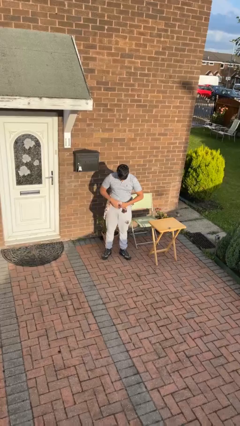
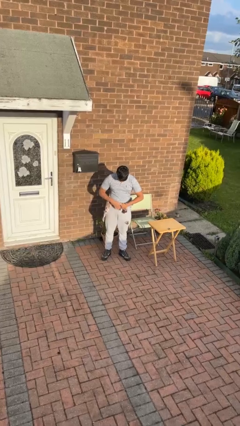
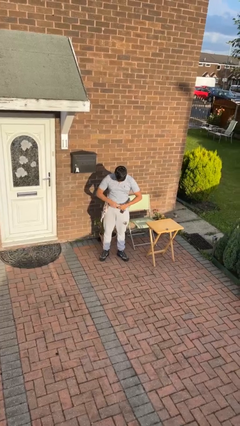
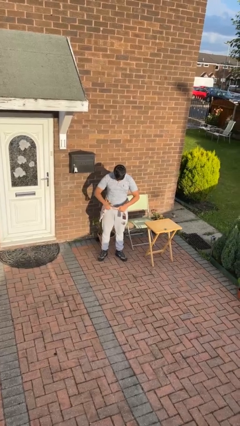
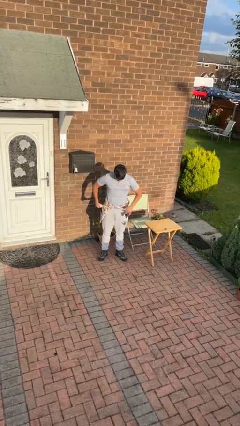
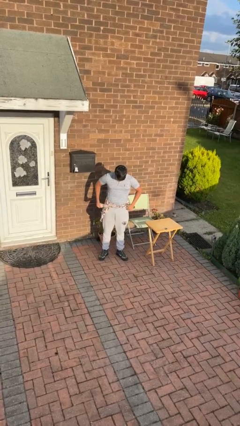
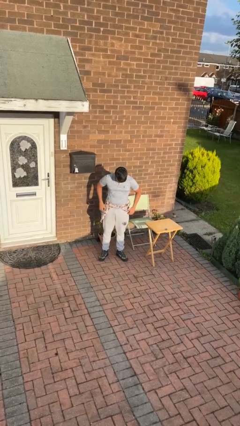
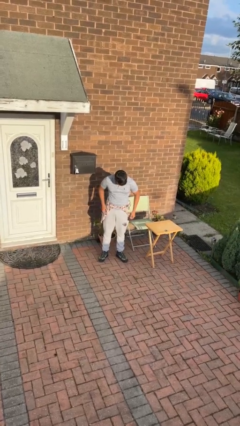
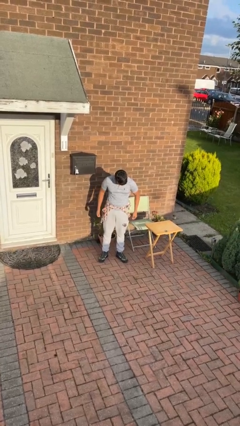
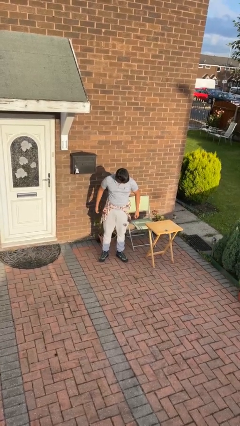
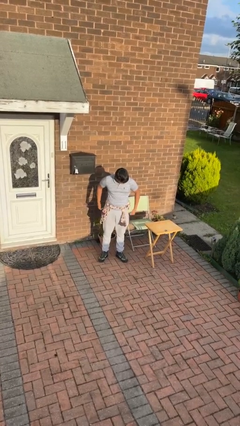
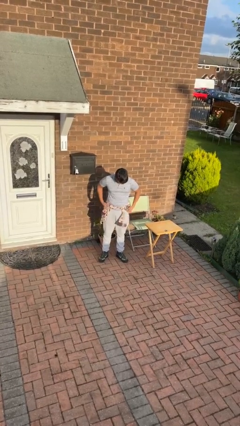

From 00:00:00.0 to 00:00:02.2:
person ties jacket around waist

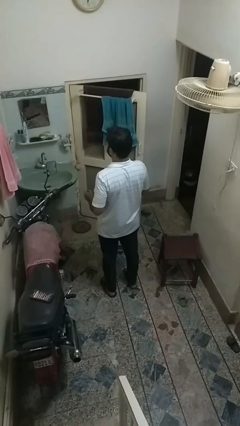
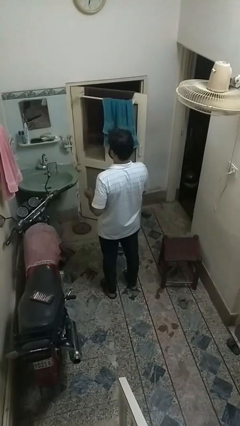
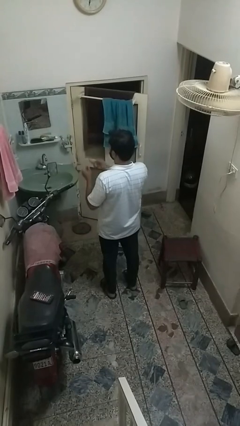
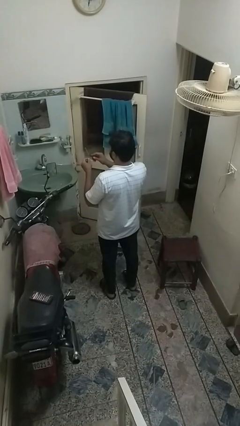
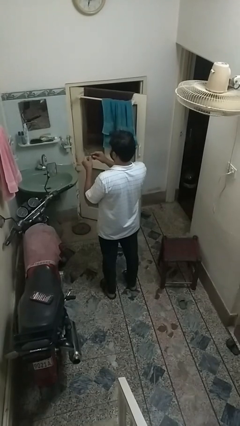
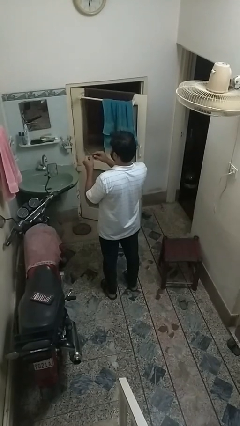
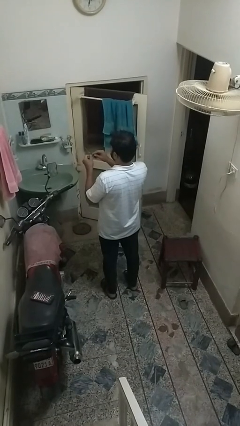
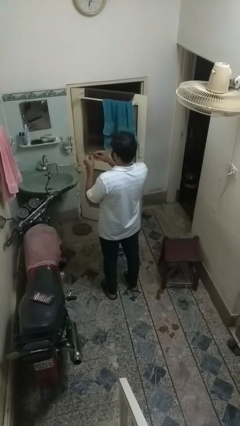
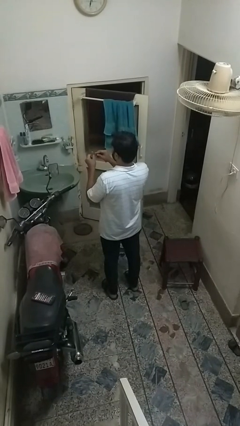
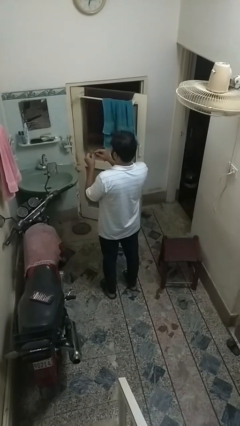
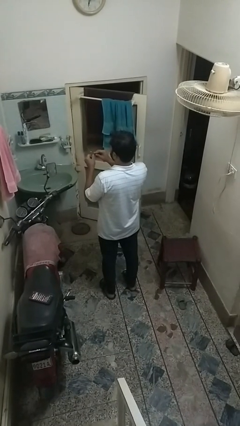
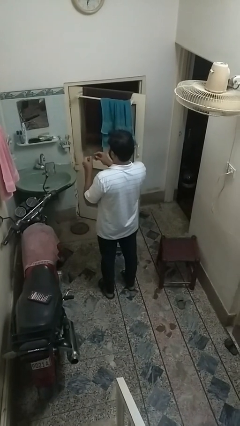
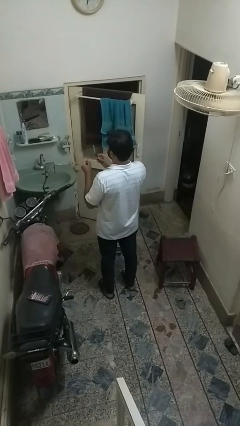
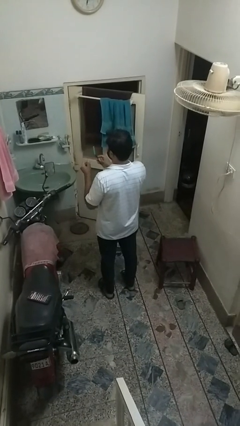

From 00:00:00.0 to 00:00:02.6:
person files fingernails

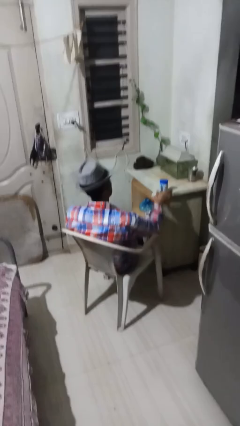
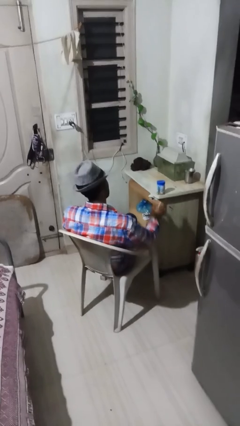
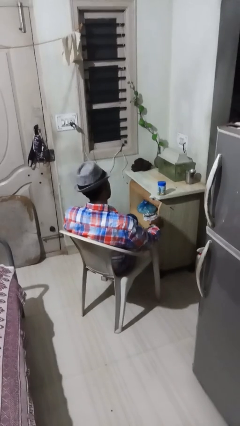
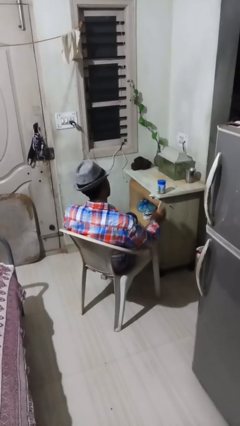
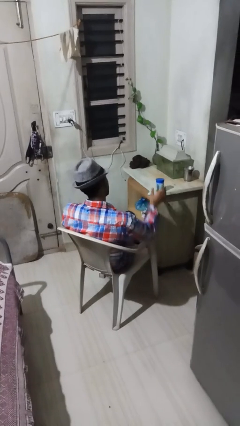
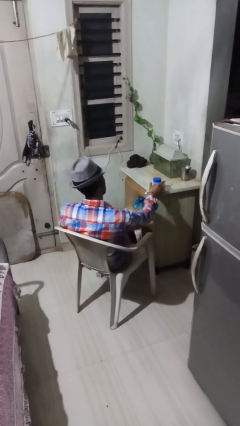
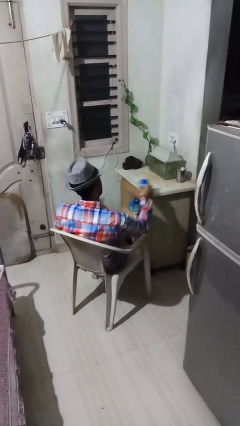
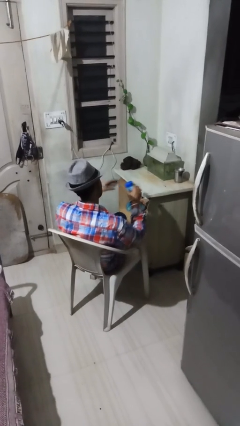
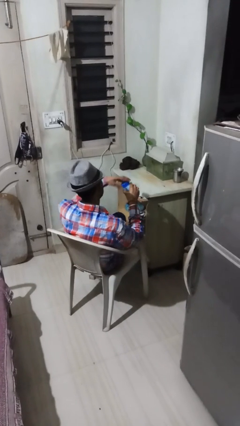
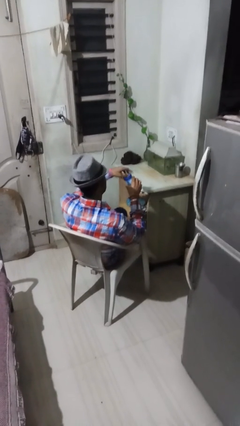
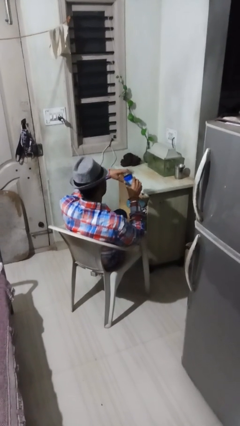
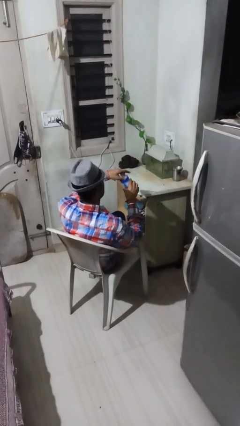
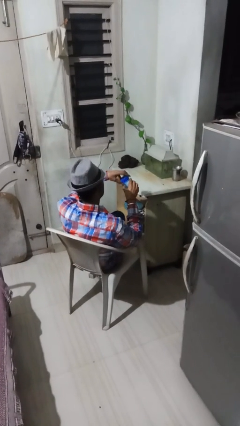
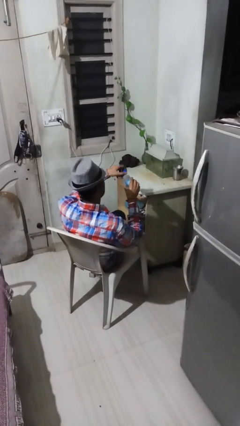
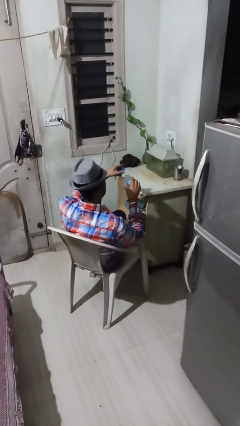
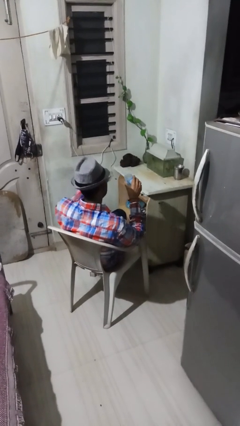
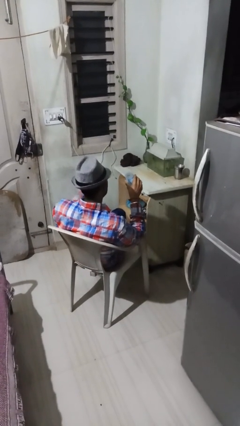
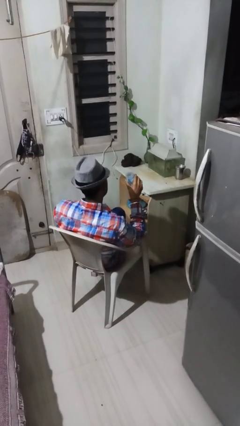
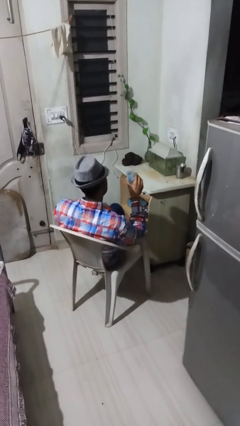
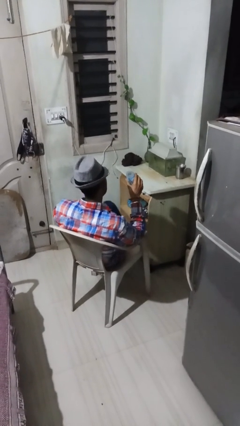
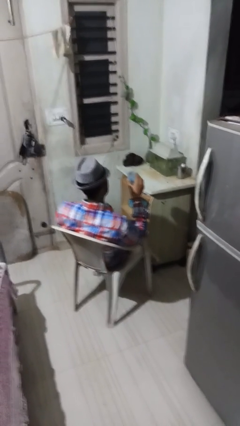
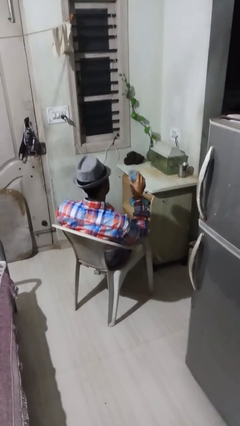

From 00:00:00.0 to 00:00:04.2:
person opens jar

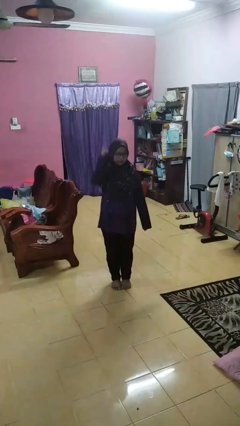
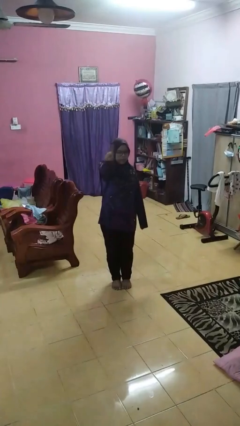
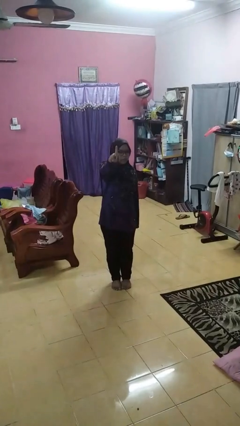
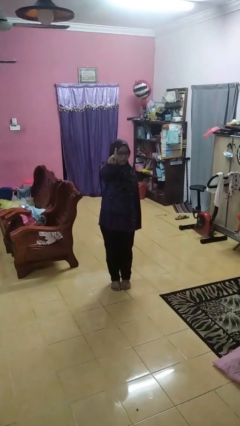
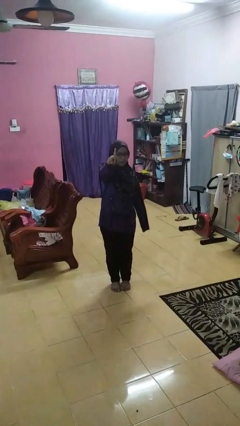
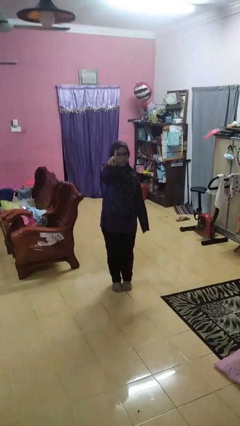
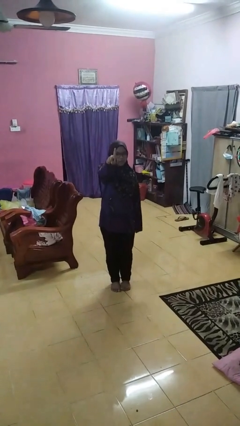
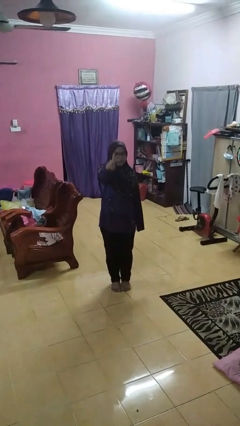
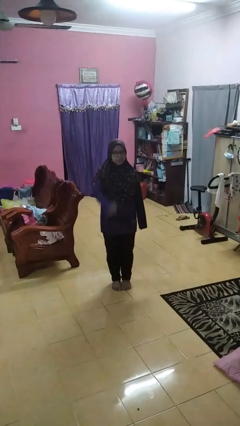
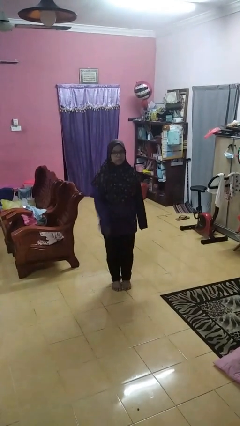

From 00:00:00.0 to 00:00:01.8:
person gestures number one

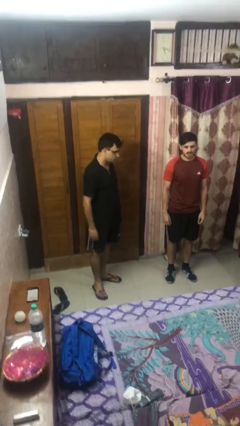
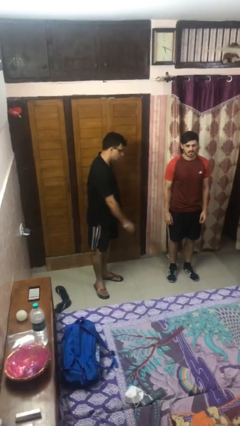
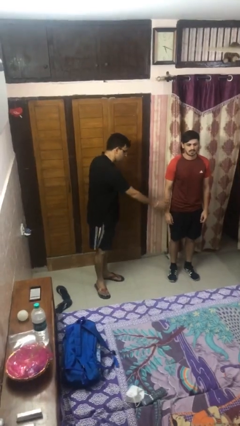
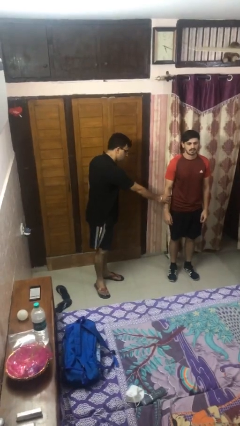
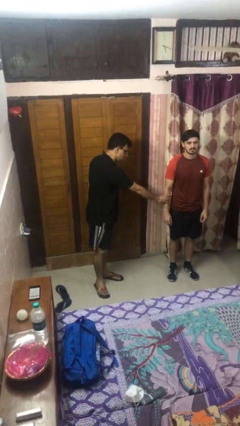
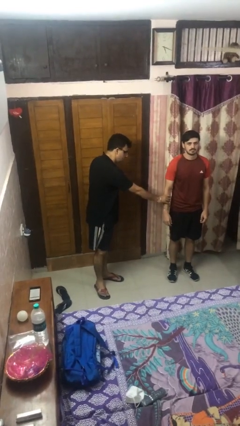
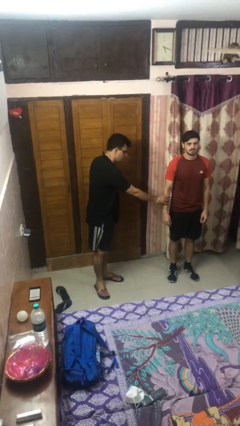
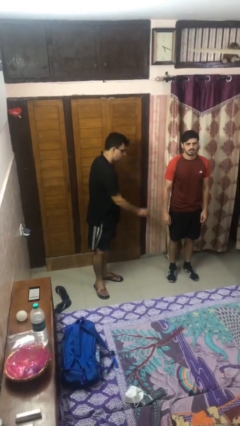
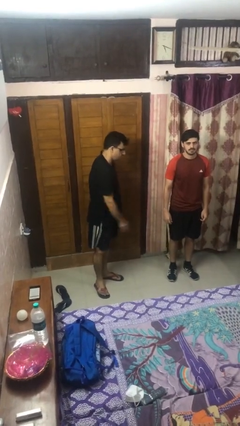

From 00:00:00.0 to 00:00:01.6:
person grabs person by forearm

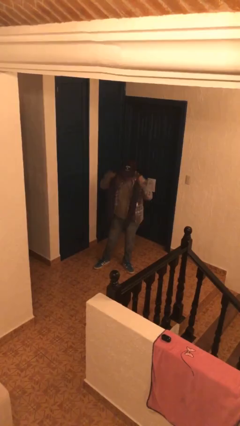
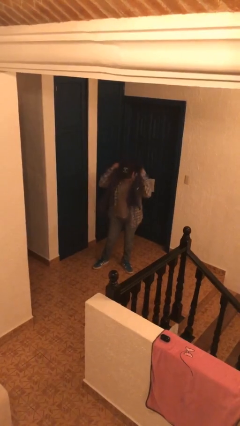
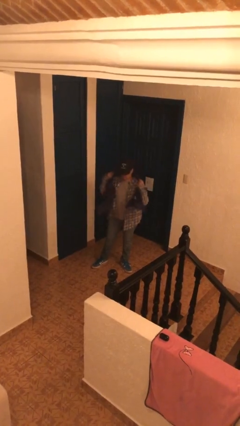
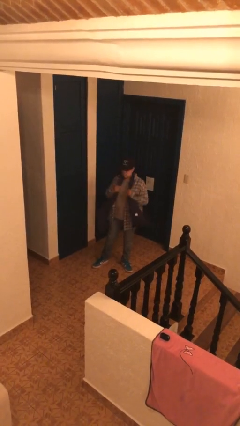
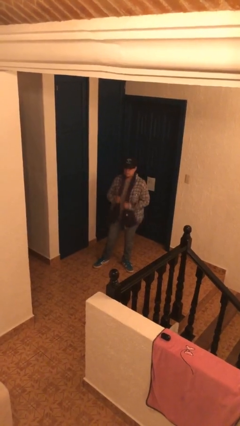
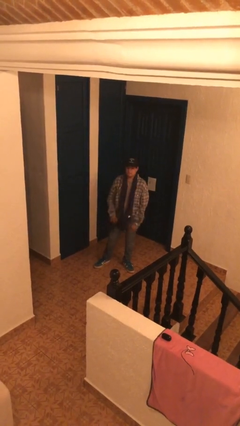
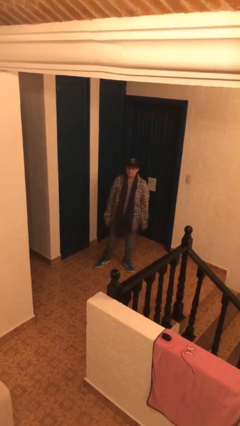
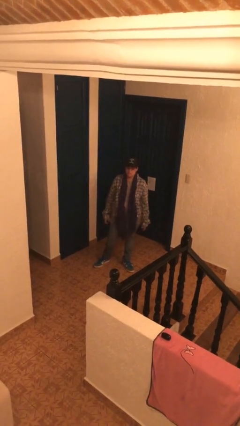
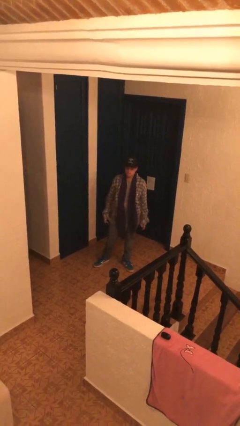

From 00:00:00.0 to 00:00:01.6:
person puts on scarf

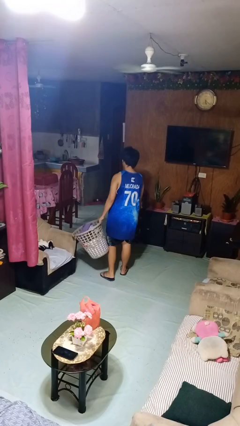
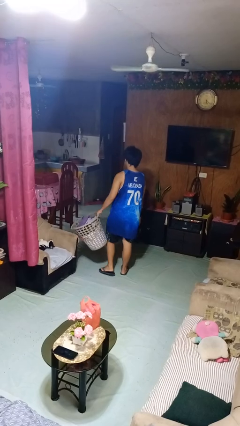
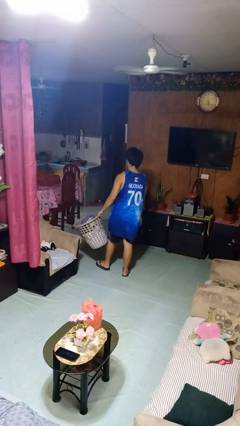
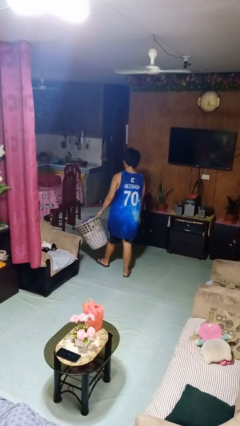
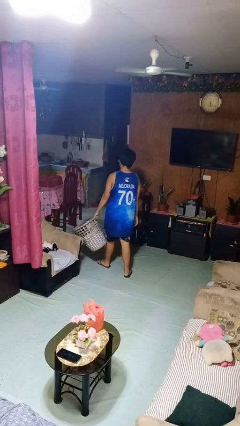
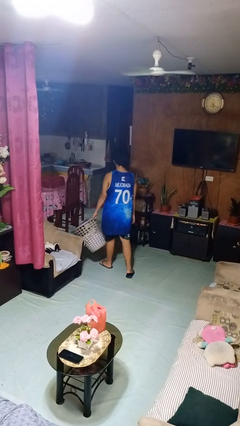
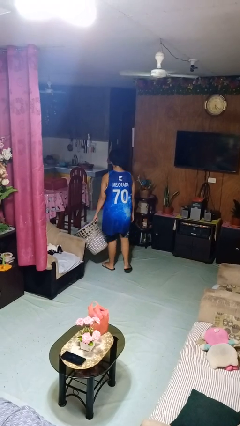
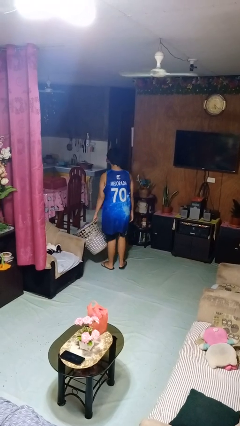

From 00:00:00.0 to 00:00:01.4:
person carries laundry basket

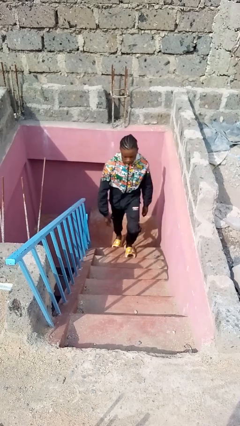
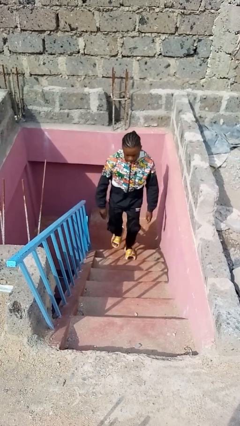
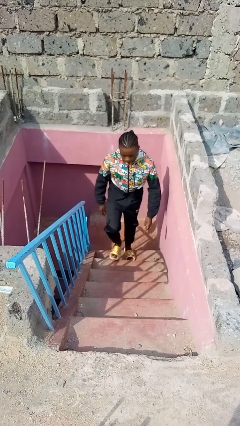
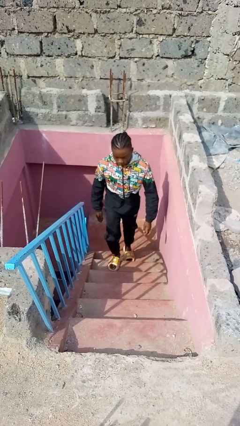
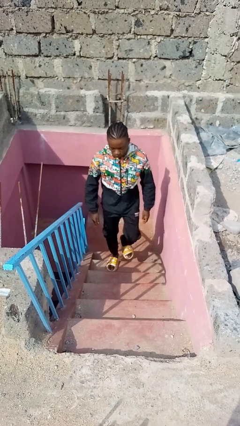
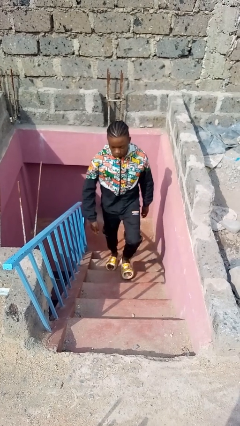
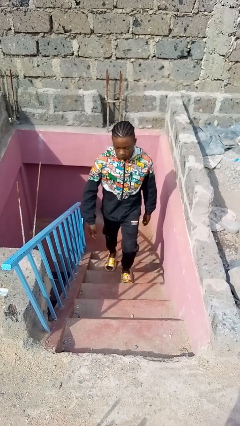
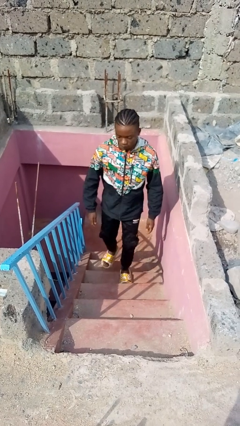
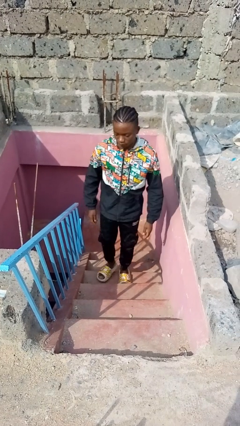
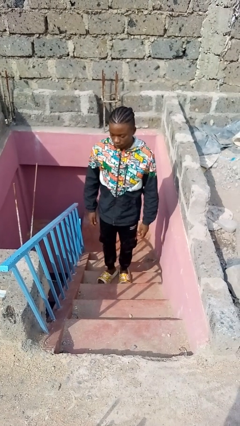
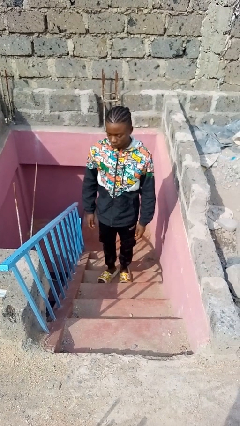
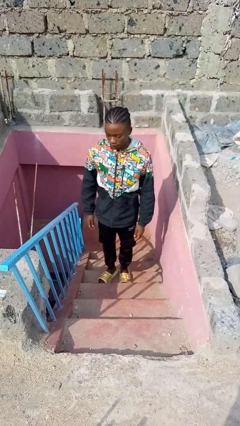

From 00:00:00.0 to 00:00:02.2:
person climbs up stairs
